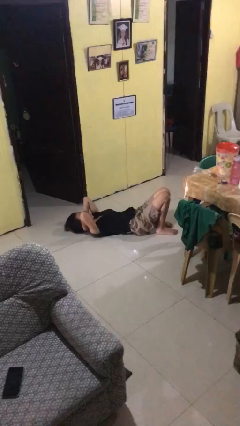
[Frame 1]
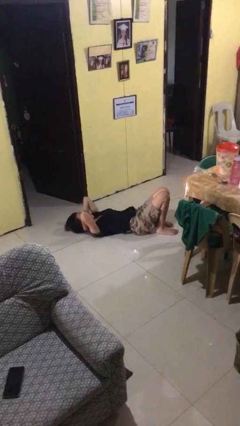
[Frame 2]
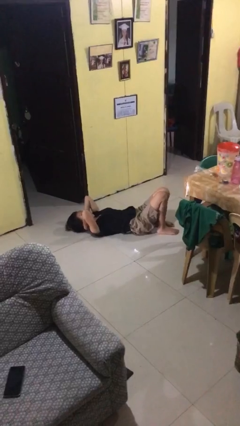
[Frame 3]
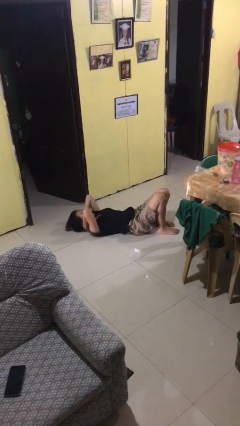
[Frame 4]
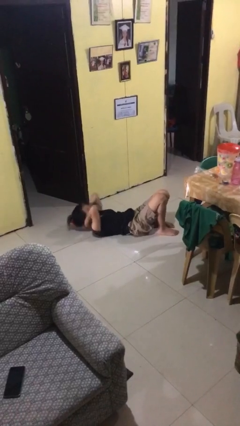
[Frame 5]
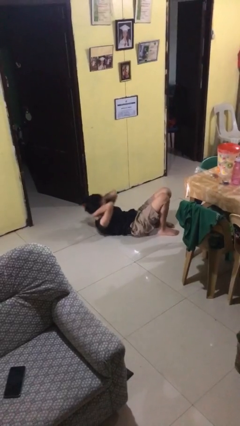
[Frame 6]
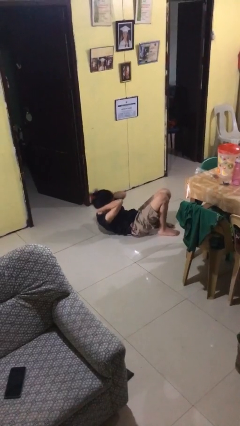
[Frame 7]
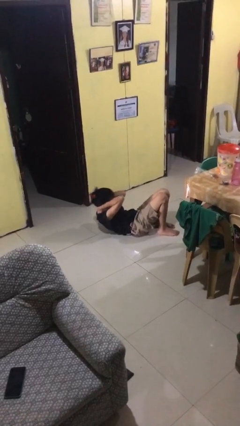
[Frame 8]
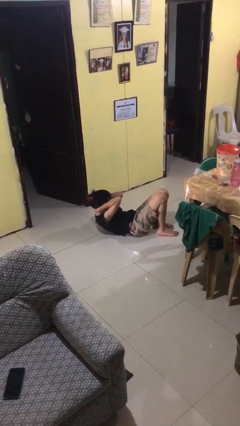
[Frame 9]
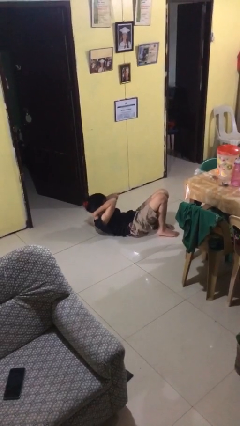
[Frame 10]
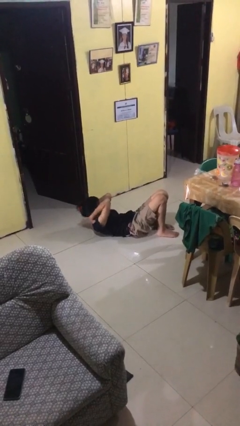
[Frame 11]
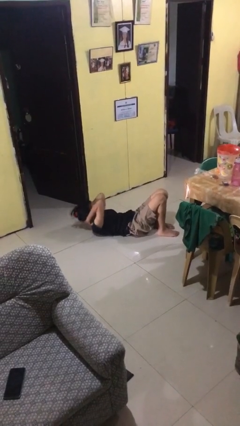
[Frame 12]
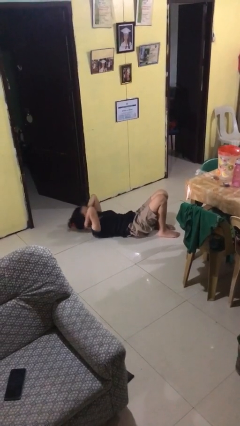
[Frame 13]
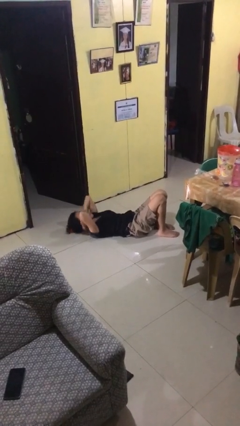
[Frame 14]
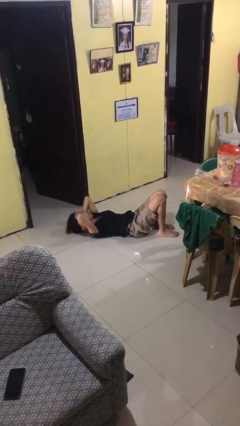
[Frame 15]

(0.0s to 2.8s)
person exercises with situp

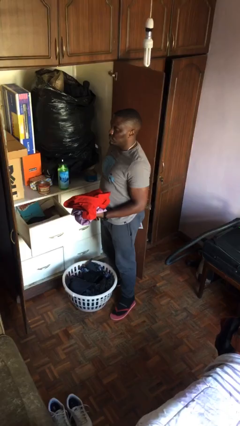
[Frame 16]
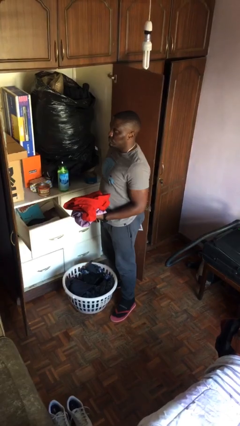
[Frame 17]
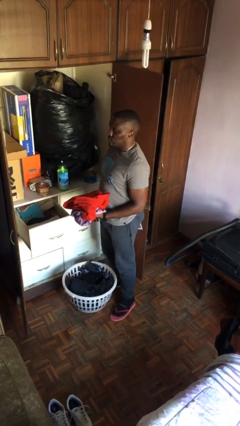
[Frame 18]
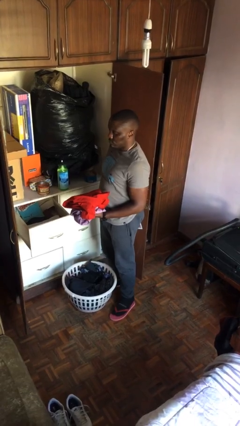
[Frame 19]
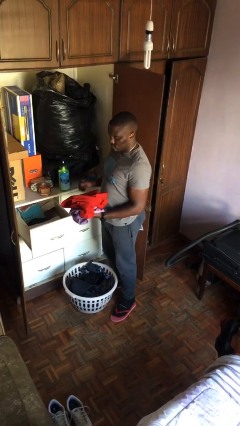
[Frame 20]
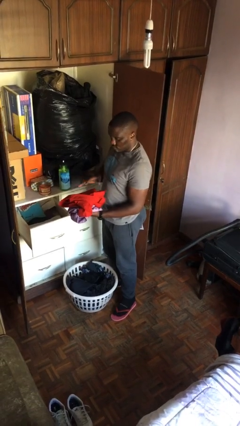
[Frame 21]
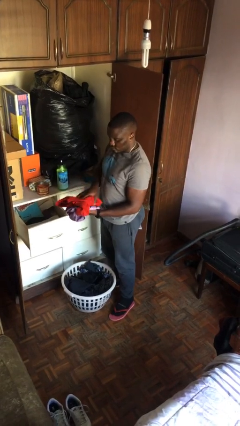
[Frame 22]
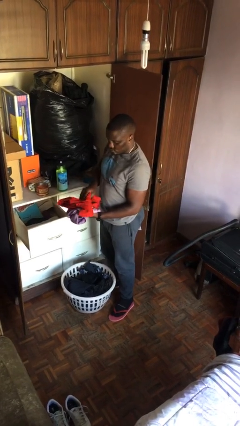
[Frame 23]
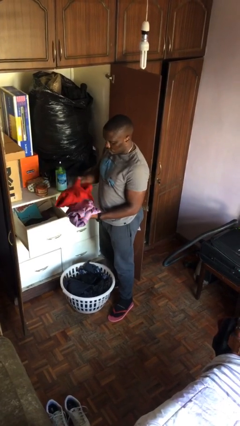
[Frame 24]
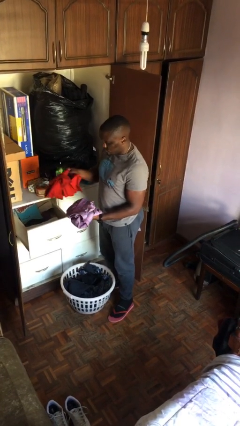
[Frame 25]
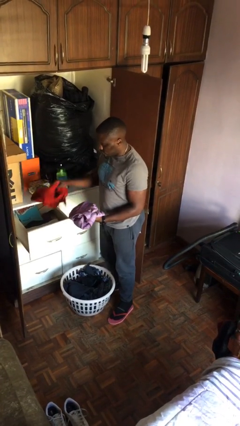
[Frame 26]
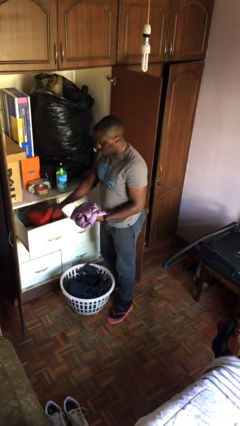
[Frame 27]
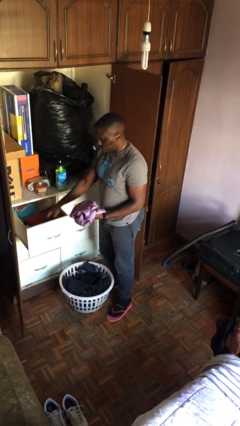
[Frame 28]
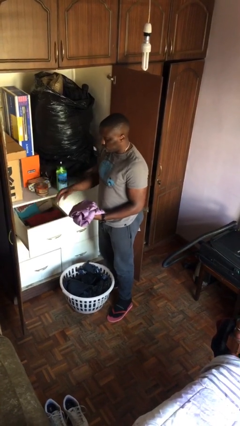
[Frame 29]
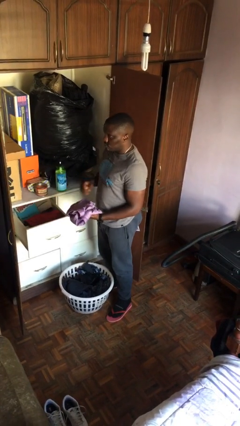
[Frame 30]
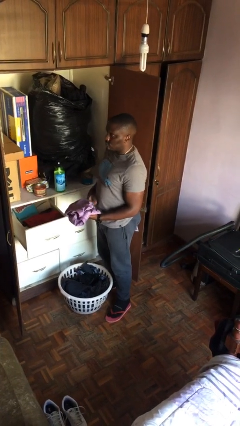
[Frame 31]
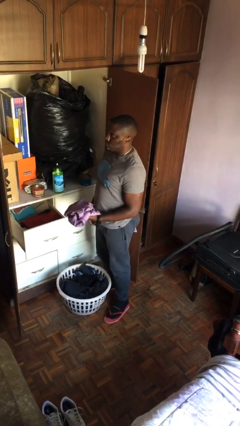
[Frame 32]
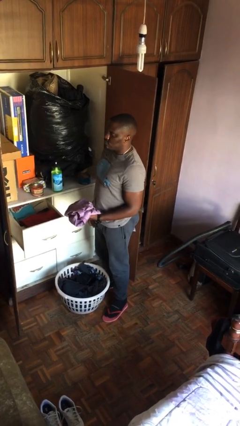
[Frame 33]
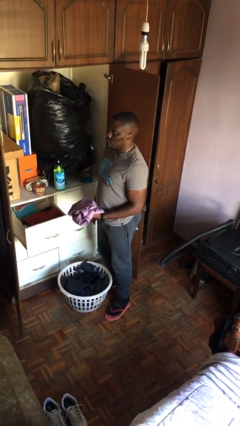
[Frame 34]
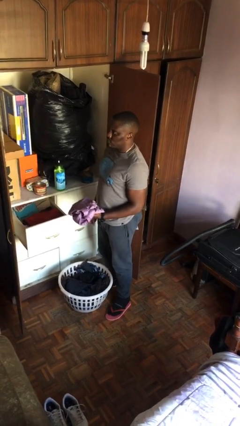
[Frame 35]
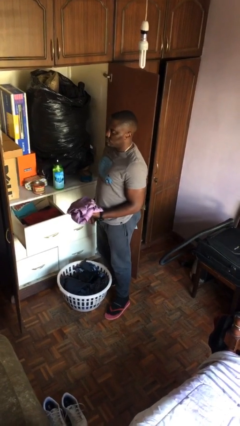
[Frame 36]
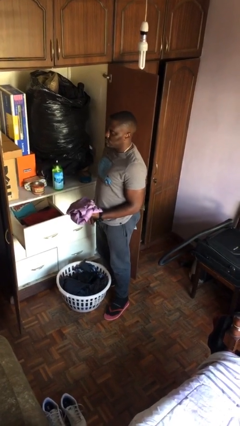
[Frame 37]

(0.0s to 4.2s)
person puts clothes into dresser

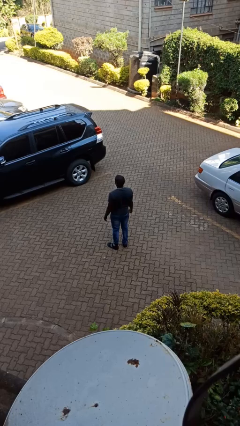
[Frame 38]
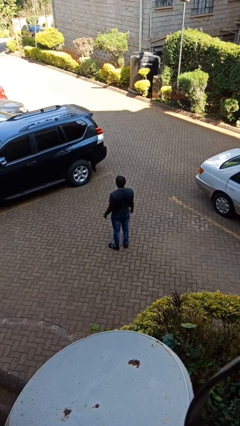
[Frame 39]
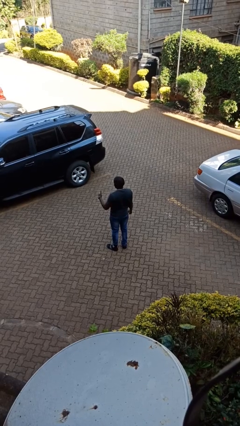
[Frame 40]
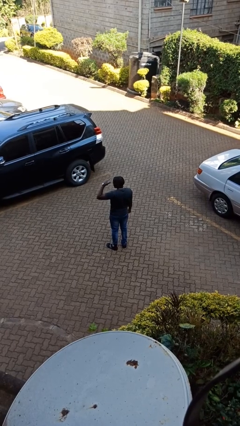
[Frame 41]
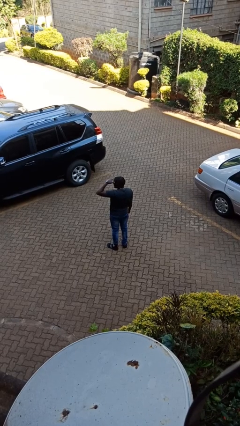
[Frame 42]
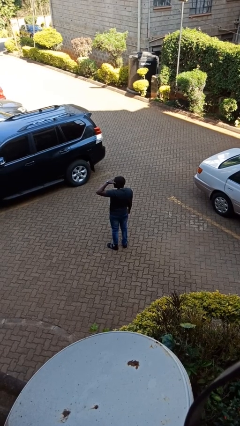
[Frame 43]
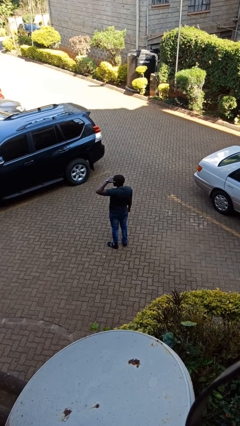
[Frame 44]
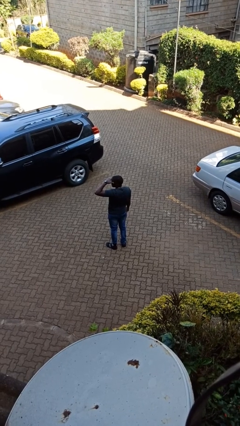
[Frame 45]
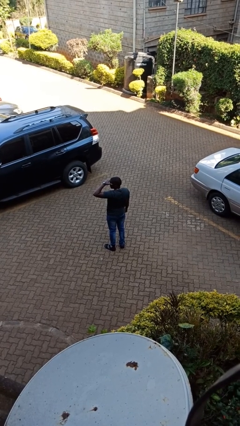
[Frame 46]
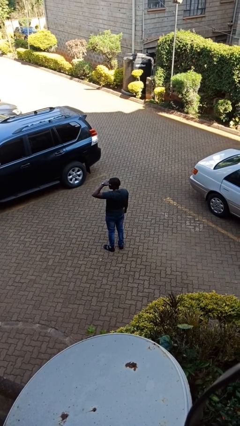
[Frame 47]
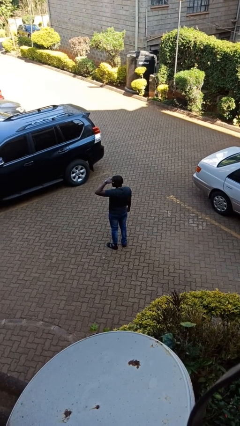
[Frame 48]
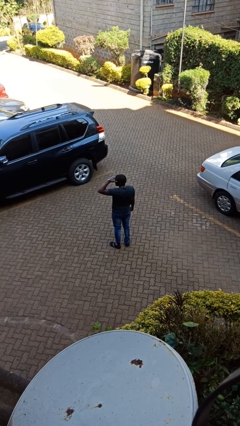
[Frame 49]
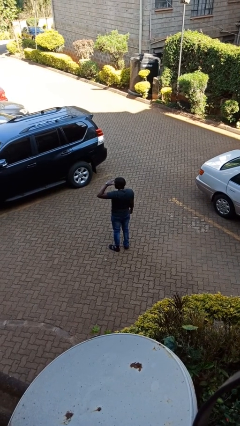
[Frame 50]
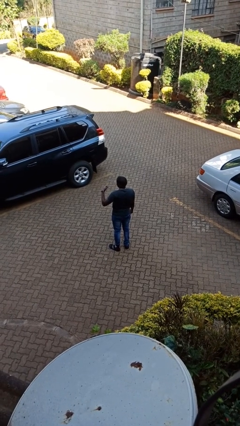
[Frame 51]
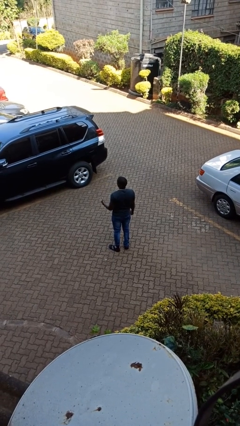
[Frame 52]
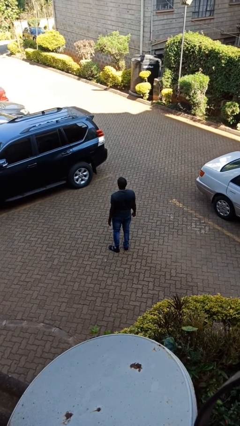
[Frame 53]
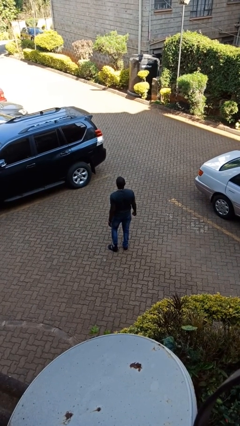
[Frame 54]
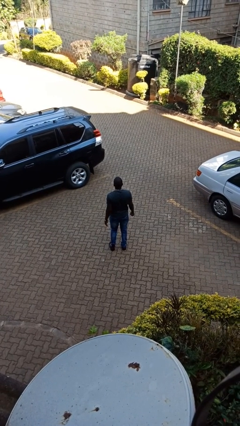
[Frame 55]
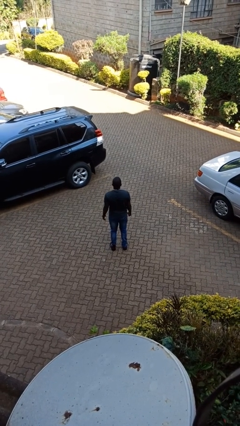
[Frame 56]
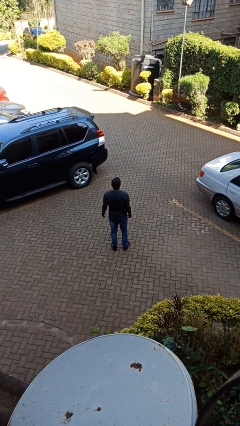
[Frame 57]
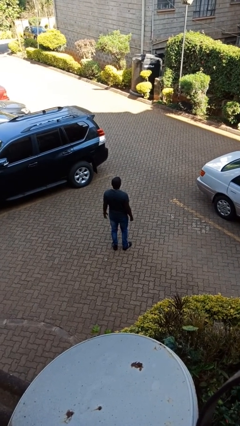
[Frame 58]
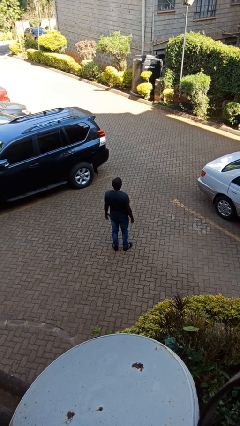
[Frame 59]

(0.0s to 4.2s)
person shades eyes

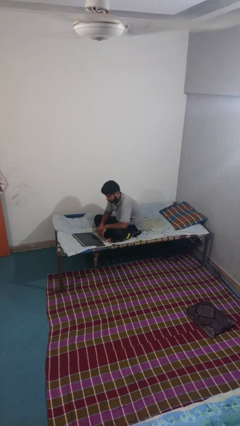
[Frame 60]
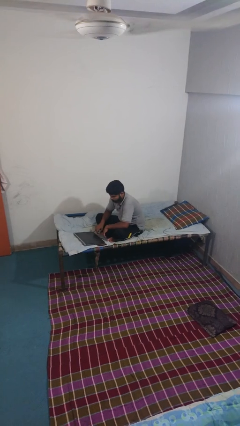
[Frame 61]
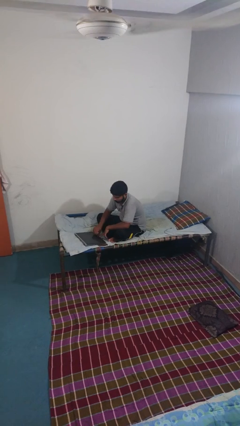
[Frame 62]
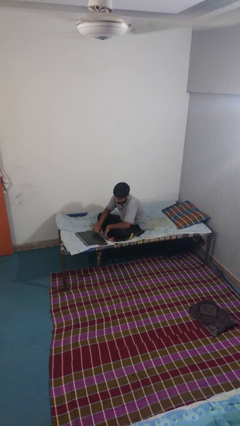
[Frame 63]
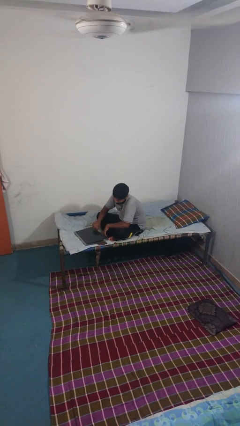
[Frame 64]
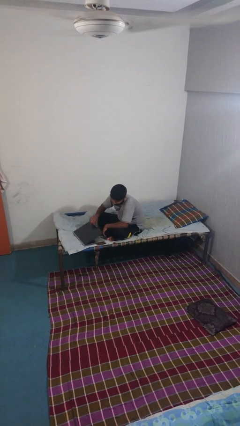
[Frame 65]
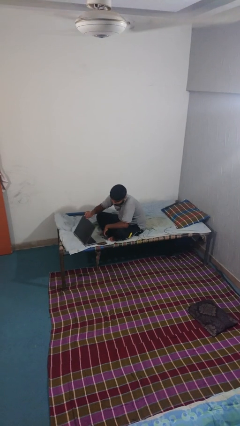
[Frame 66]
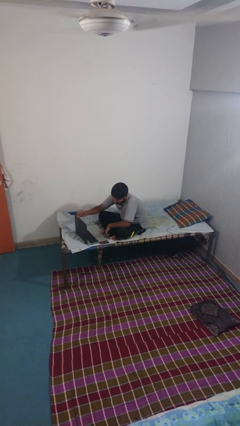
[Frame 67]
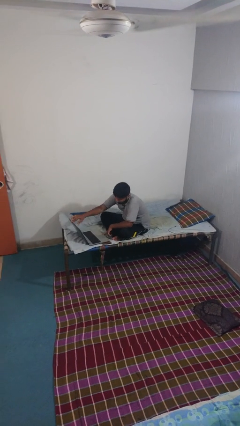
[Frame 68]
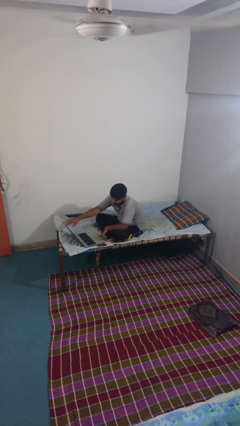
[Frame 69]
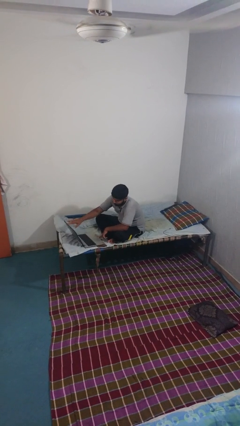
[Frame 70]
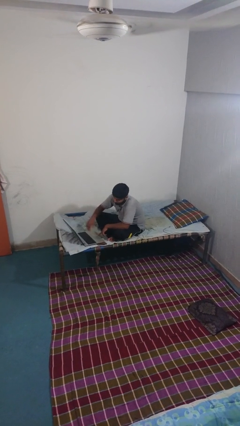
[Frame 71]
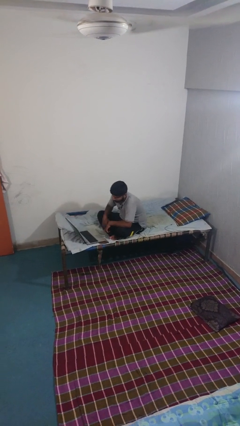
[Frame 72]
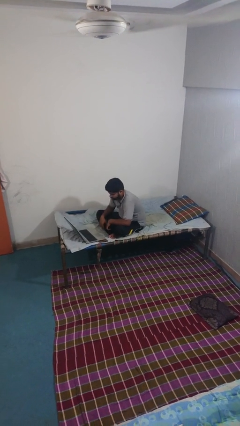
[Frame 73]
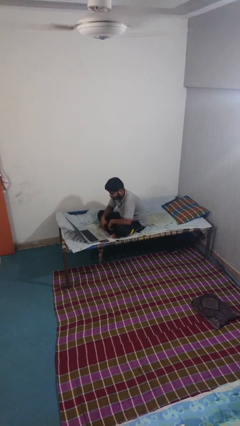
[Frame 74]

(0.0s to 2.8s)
person opens laptop

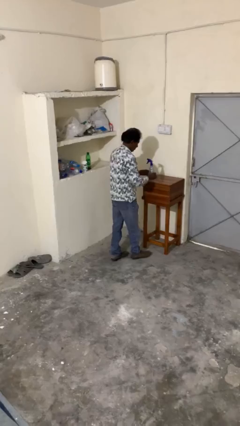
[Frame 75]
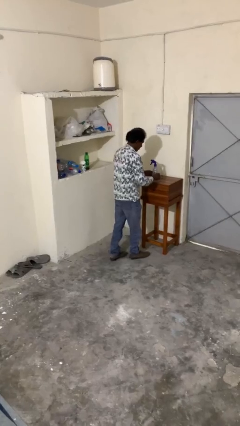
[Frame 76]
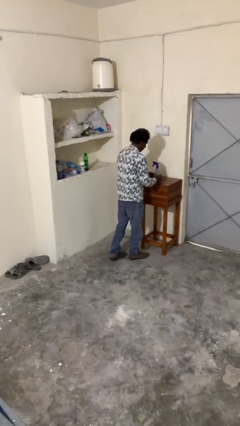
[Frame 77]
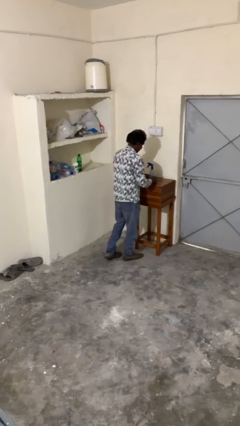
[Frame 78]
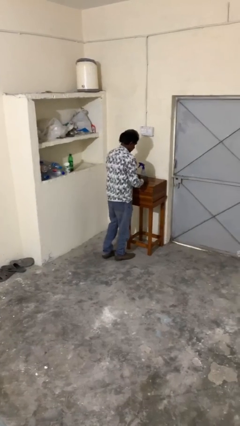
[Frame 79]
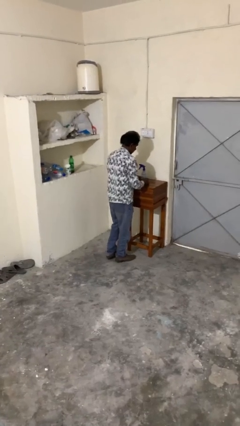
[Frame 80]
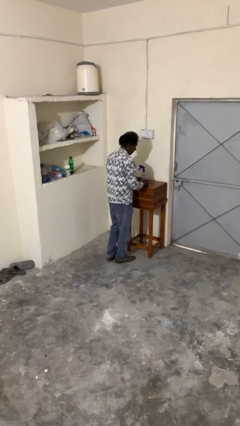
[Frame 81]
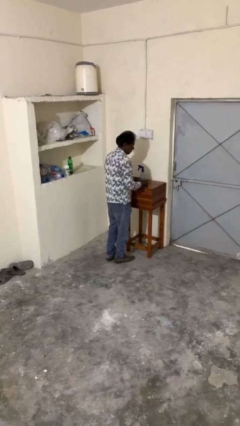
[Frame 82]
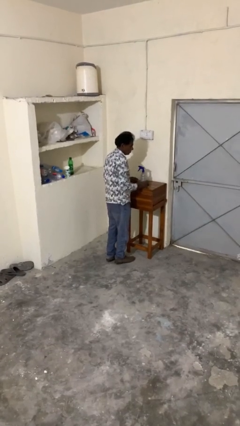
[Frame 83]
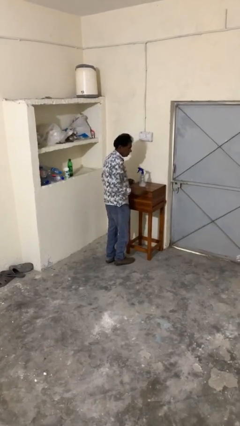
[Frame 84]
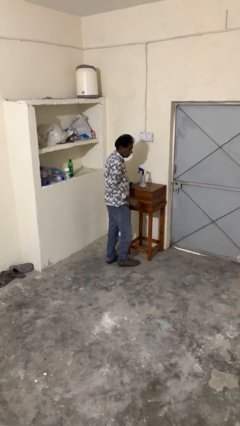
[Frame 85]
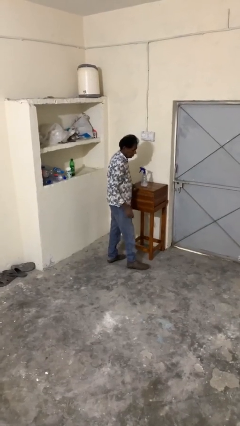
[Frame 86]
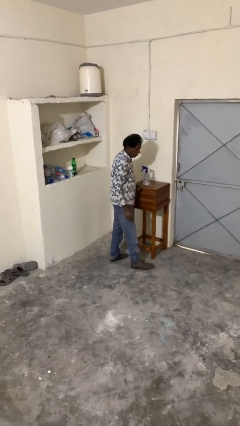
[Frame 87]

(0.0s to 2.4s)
person puts down object on table

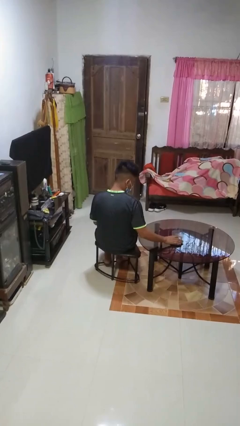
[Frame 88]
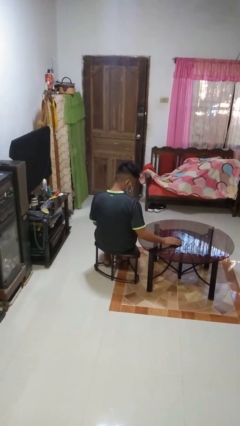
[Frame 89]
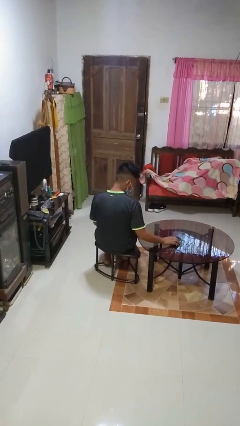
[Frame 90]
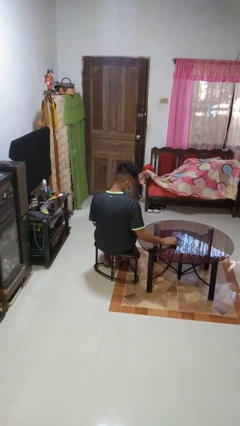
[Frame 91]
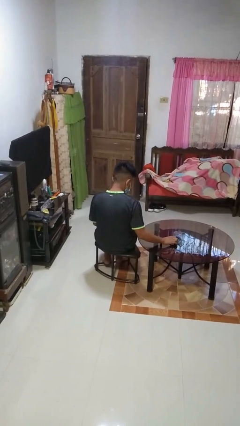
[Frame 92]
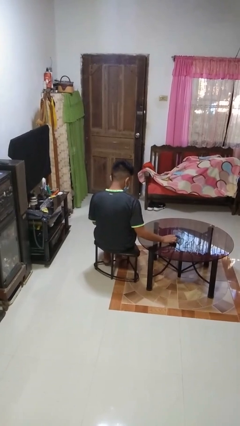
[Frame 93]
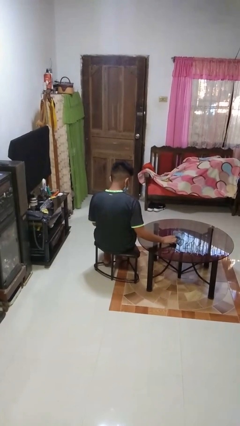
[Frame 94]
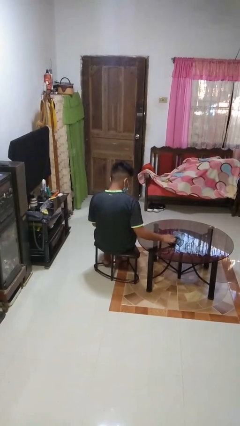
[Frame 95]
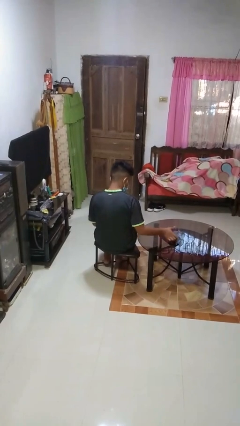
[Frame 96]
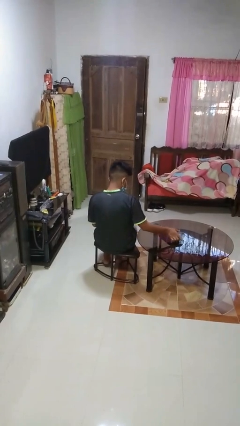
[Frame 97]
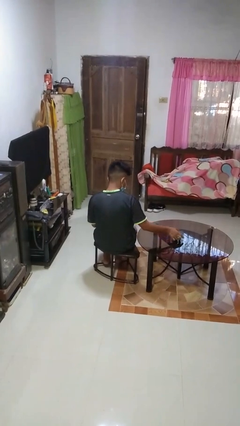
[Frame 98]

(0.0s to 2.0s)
person drinks from beverage can
